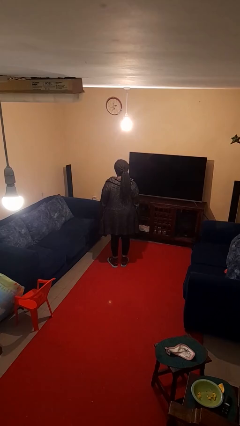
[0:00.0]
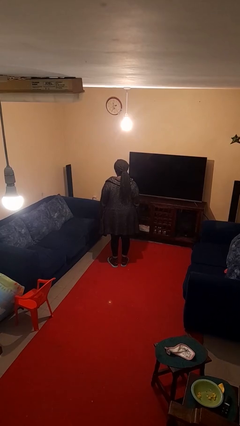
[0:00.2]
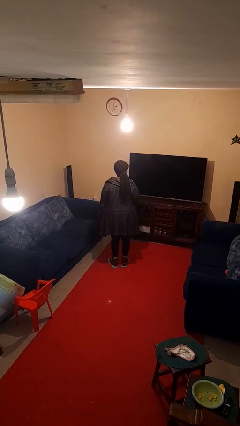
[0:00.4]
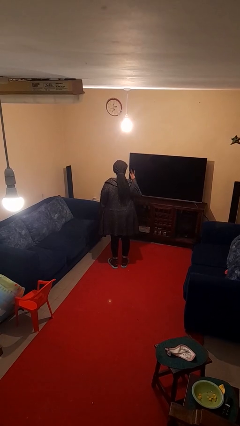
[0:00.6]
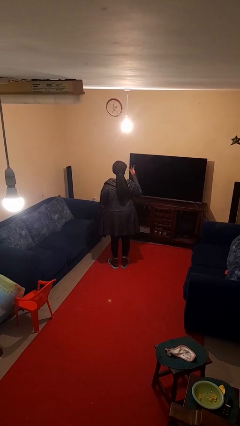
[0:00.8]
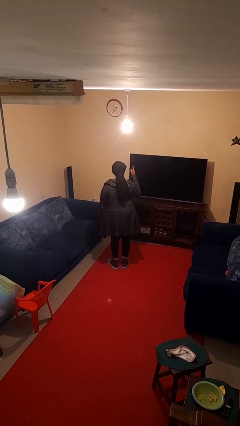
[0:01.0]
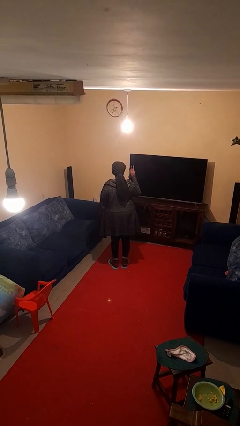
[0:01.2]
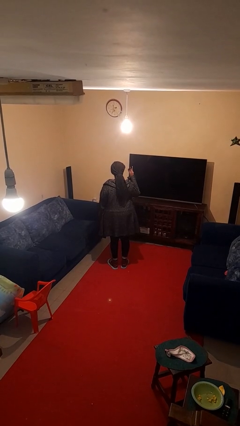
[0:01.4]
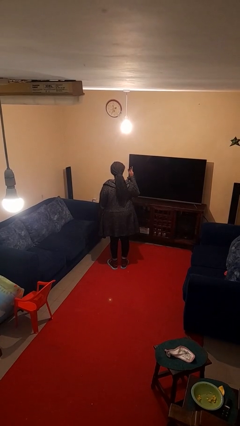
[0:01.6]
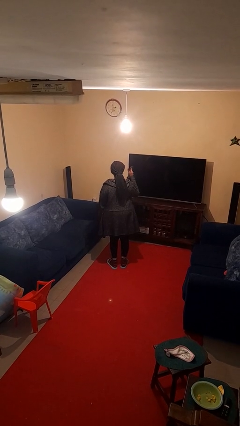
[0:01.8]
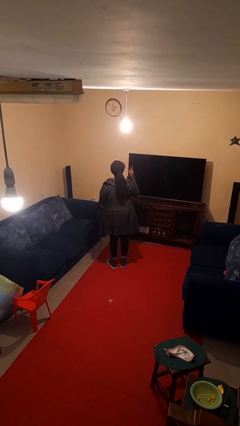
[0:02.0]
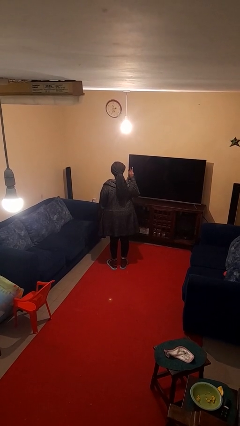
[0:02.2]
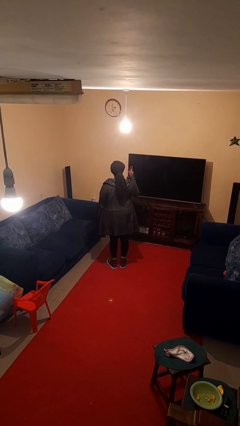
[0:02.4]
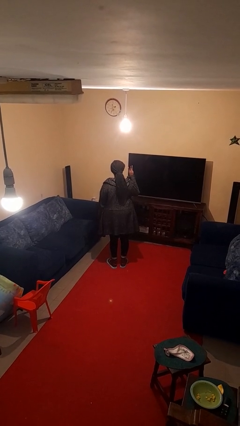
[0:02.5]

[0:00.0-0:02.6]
person gestures number three

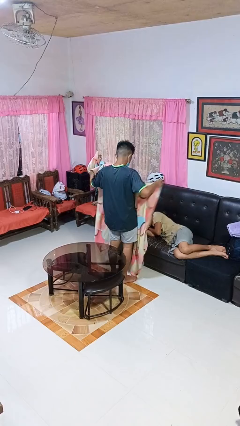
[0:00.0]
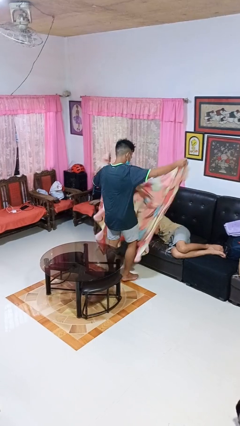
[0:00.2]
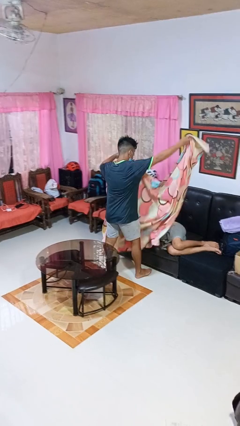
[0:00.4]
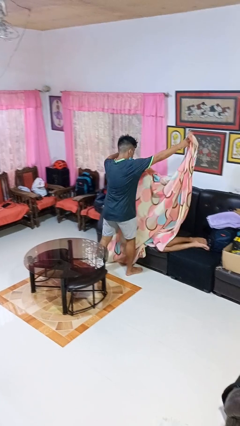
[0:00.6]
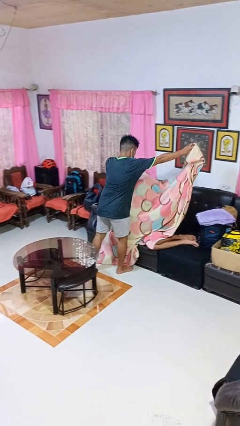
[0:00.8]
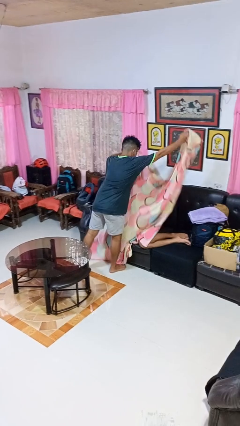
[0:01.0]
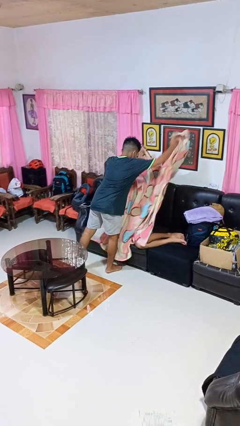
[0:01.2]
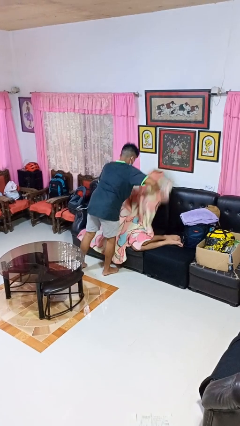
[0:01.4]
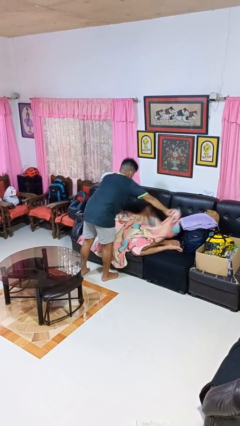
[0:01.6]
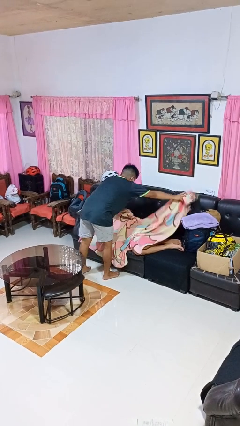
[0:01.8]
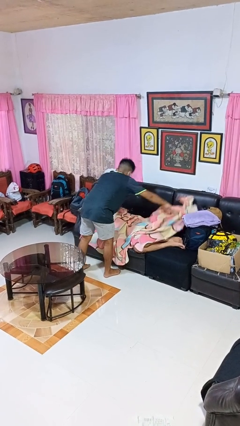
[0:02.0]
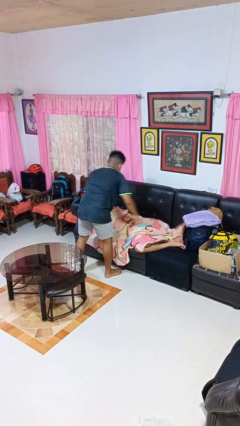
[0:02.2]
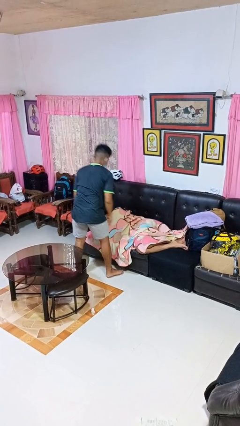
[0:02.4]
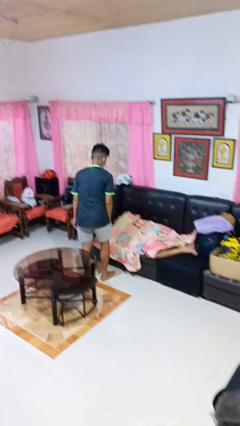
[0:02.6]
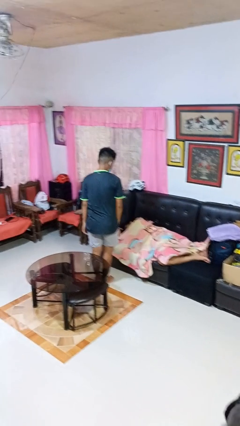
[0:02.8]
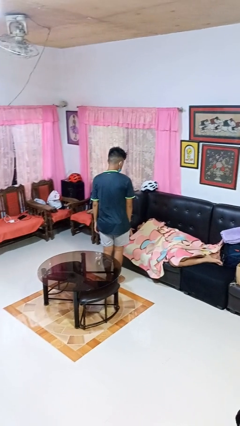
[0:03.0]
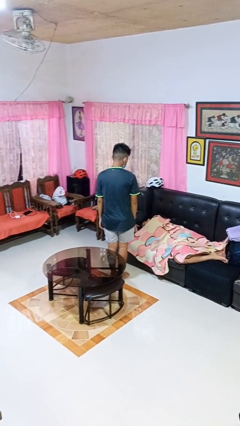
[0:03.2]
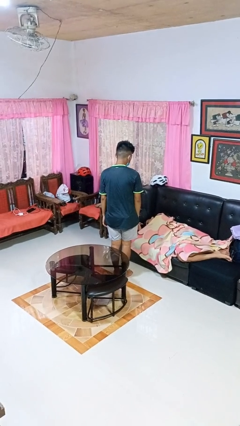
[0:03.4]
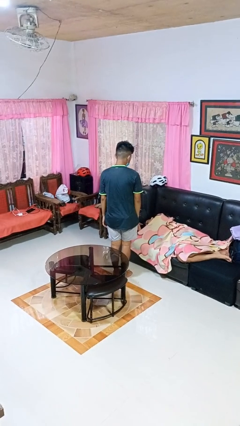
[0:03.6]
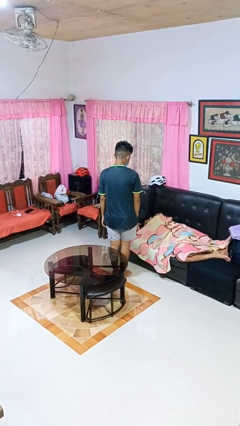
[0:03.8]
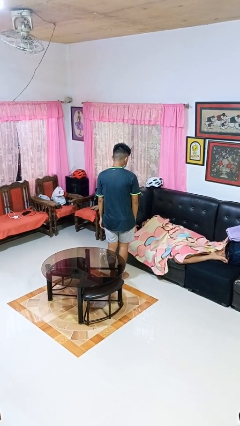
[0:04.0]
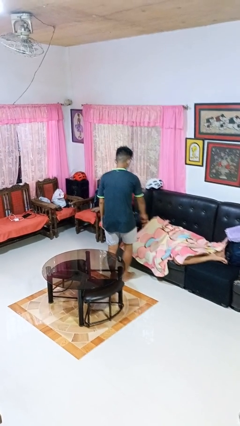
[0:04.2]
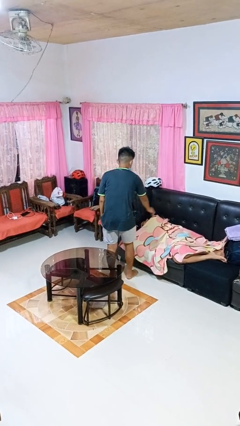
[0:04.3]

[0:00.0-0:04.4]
person covers friend with blanket

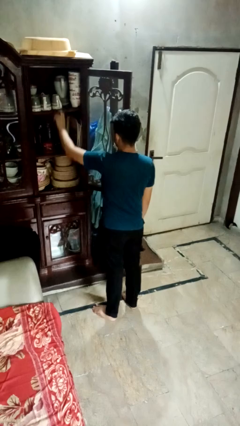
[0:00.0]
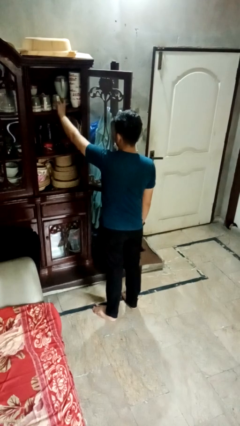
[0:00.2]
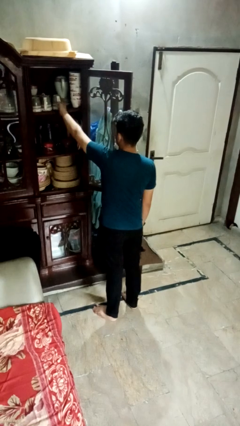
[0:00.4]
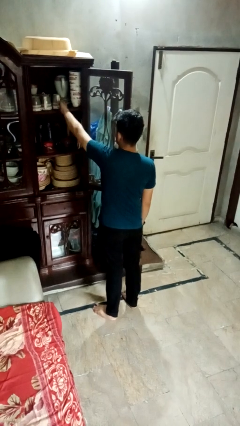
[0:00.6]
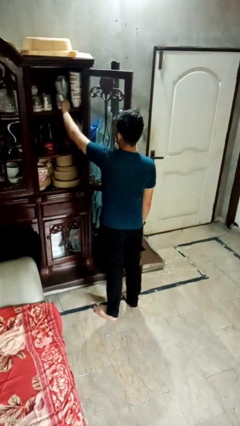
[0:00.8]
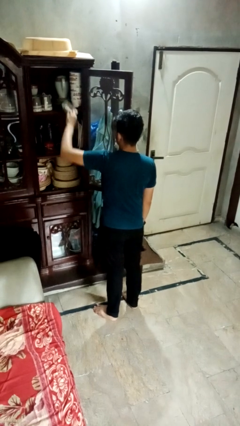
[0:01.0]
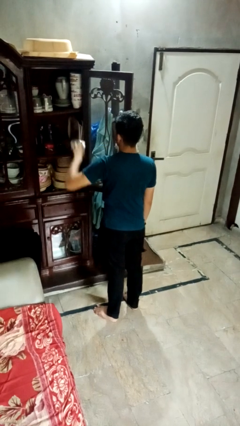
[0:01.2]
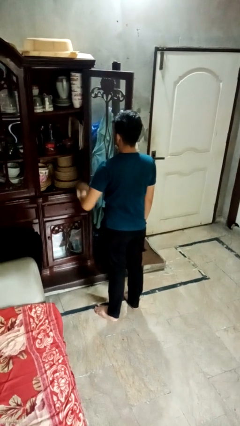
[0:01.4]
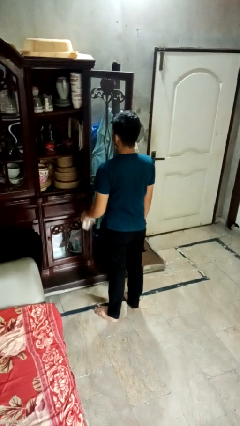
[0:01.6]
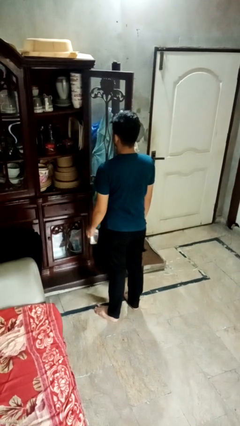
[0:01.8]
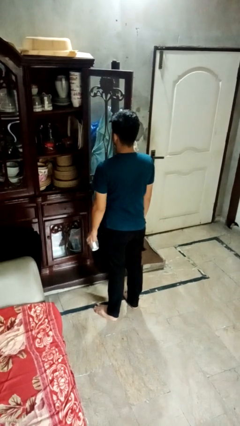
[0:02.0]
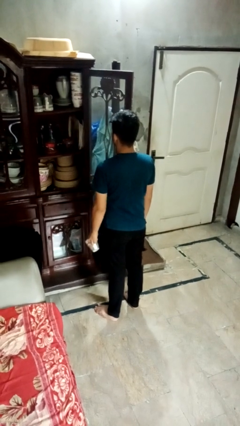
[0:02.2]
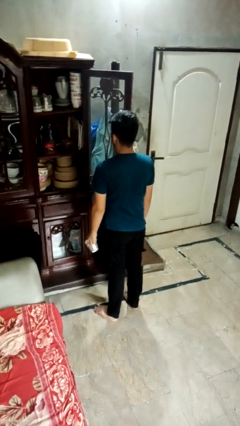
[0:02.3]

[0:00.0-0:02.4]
person takes object from cabinet

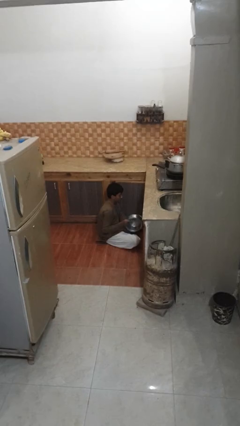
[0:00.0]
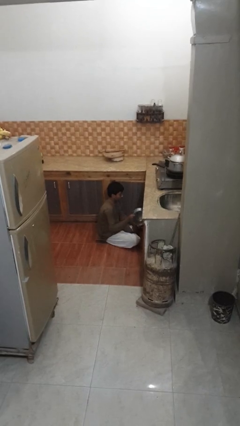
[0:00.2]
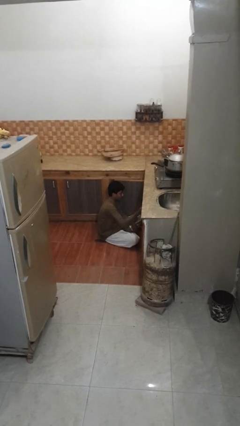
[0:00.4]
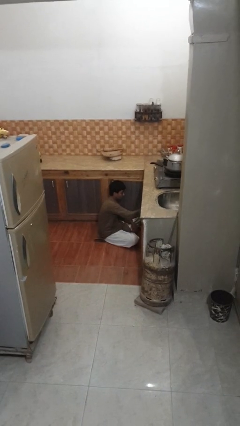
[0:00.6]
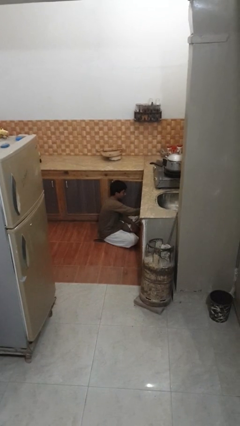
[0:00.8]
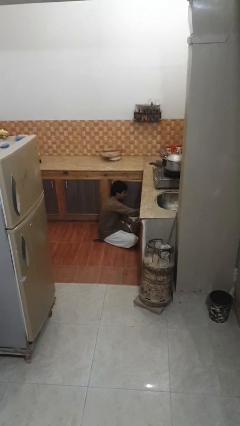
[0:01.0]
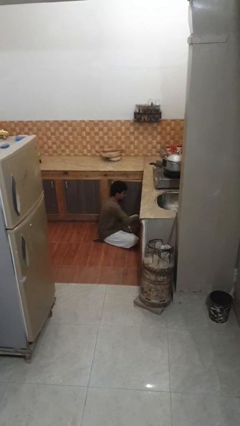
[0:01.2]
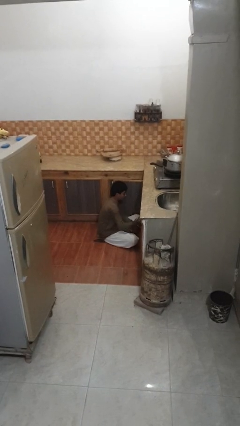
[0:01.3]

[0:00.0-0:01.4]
person puts object into kitchen drawer

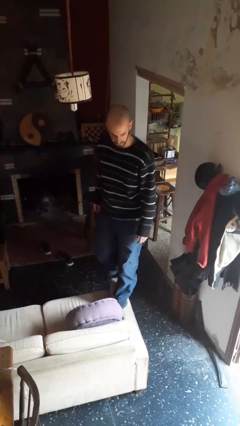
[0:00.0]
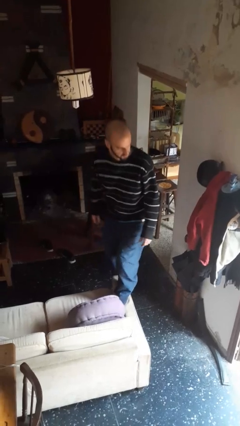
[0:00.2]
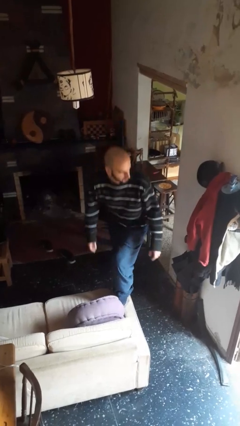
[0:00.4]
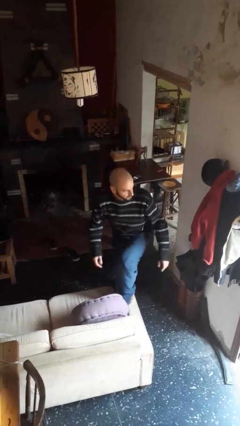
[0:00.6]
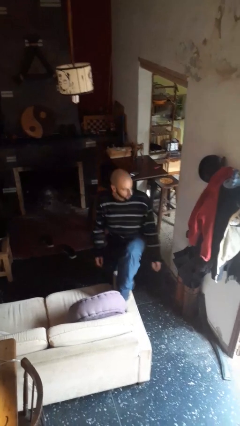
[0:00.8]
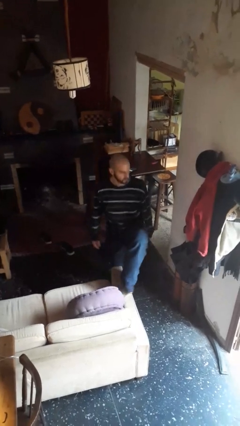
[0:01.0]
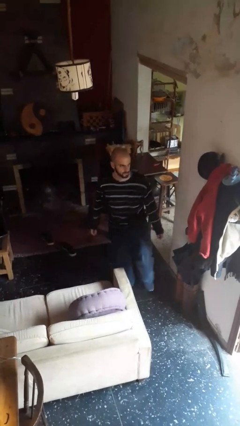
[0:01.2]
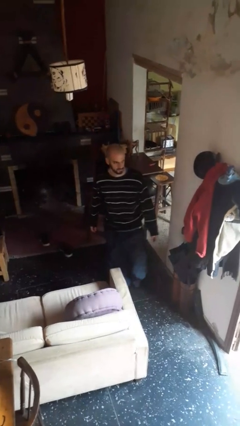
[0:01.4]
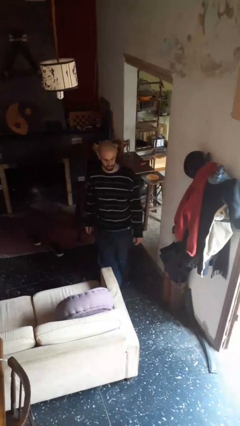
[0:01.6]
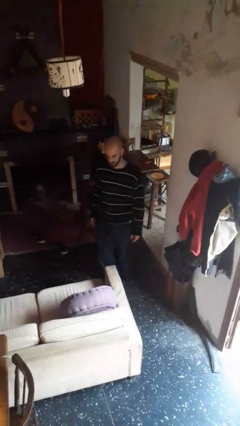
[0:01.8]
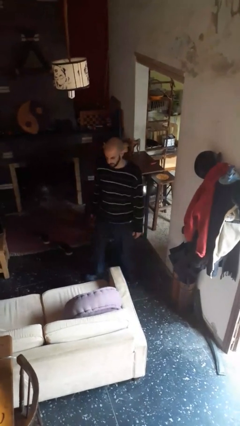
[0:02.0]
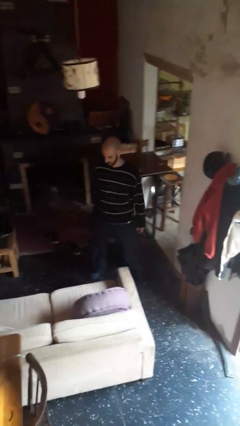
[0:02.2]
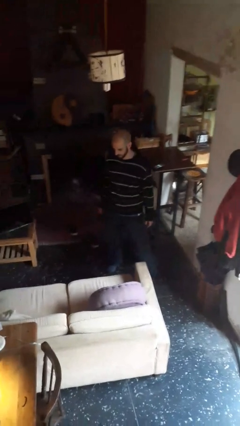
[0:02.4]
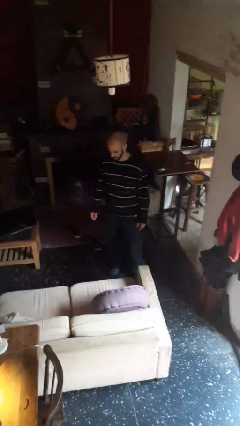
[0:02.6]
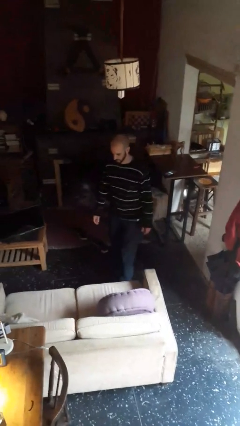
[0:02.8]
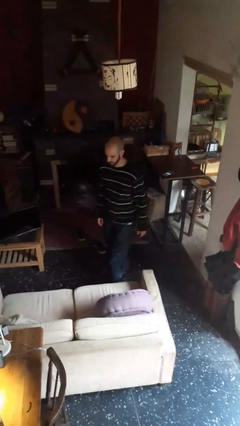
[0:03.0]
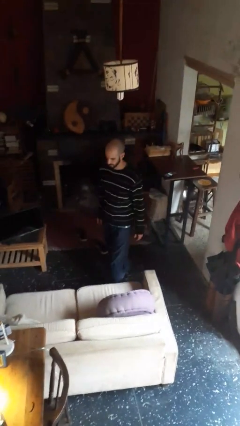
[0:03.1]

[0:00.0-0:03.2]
person climbs off couch

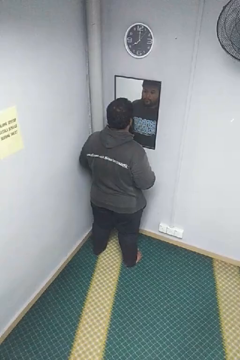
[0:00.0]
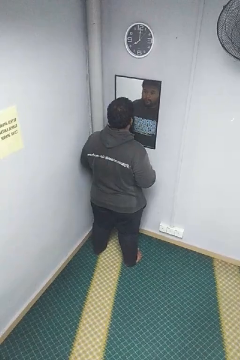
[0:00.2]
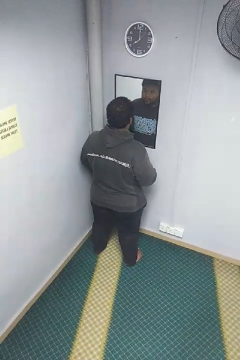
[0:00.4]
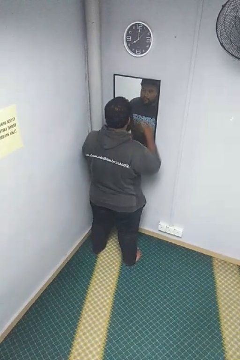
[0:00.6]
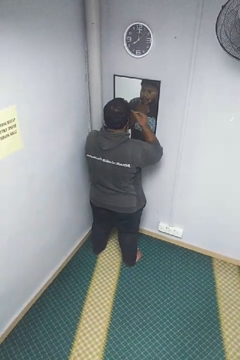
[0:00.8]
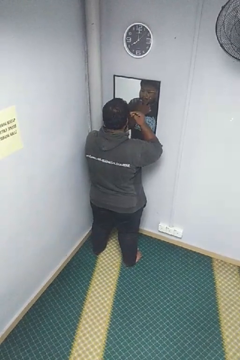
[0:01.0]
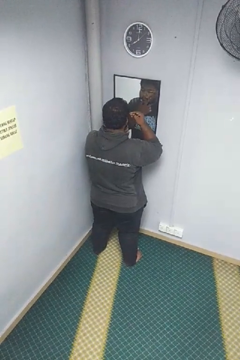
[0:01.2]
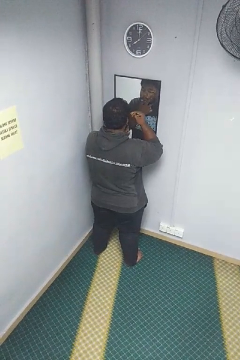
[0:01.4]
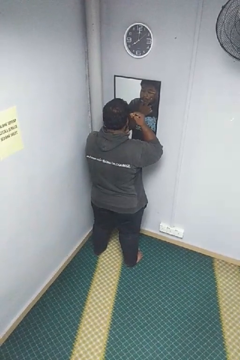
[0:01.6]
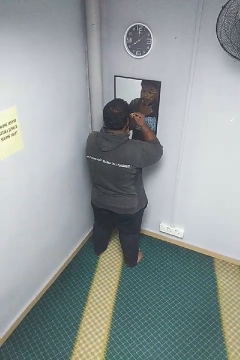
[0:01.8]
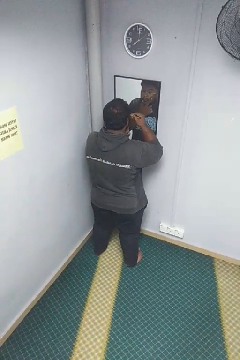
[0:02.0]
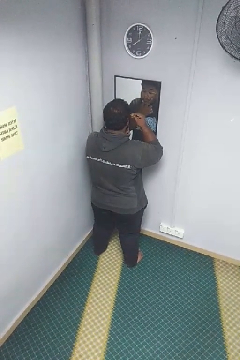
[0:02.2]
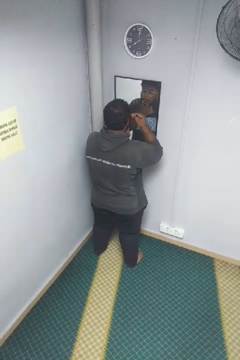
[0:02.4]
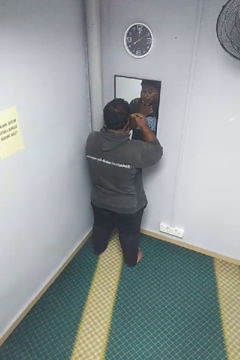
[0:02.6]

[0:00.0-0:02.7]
person applies eye makeup

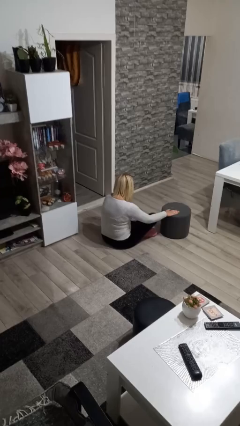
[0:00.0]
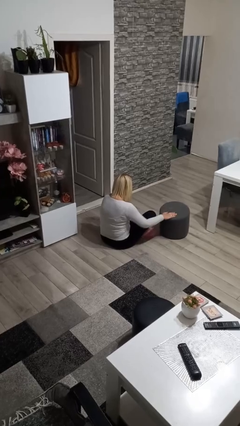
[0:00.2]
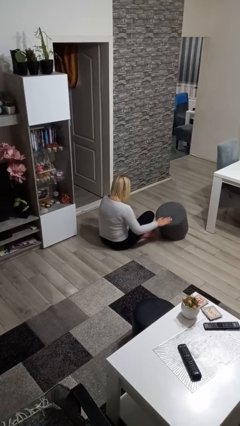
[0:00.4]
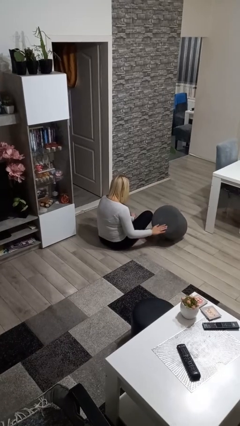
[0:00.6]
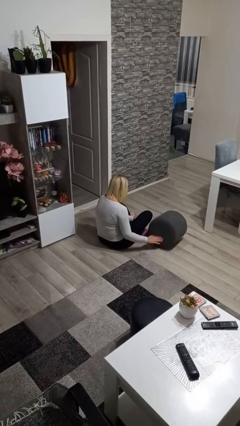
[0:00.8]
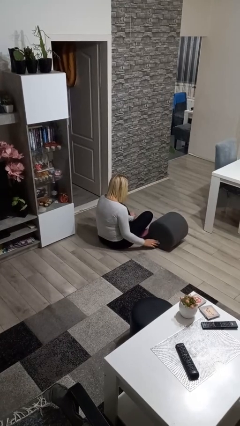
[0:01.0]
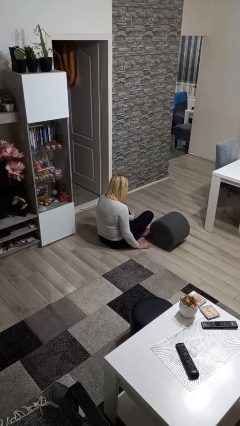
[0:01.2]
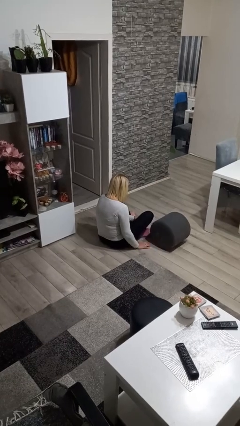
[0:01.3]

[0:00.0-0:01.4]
person knocks over furniture
